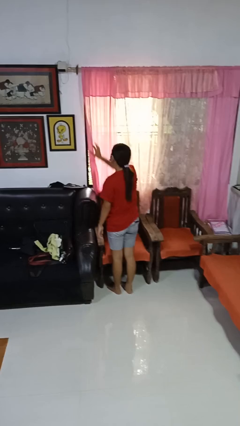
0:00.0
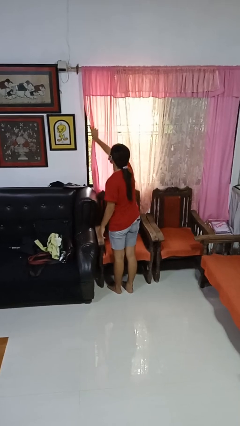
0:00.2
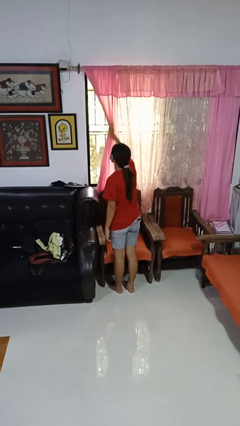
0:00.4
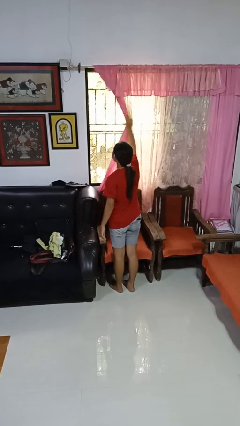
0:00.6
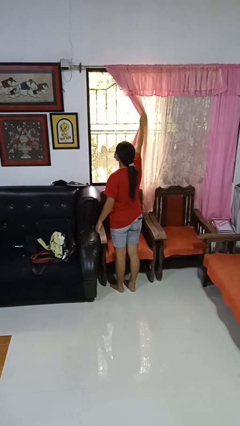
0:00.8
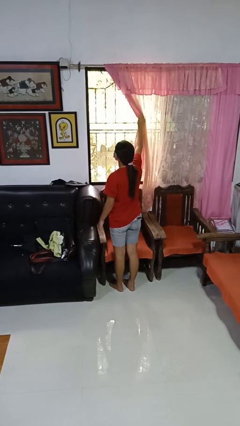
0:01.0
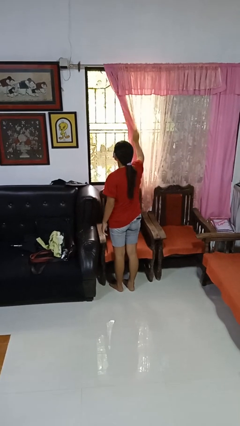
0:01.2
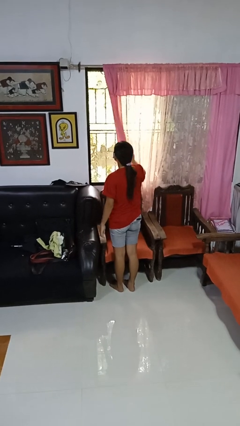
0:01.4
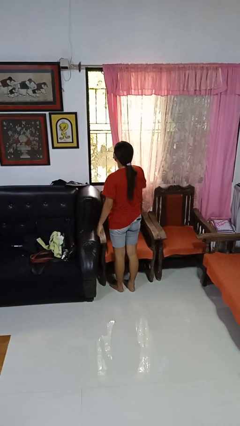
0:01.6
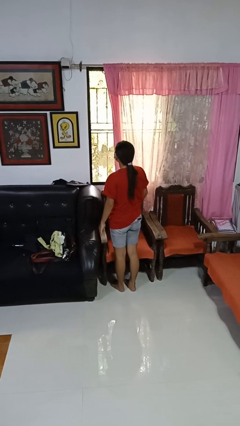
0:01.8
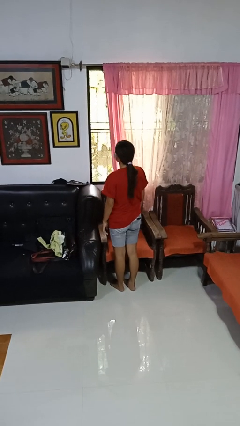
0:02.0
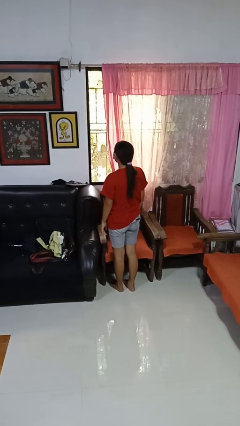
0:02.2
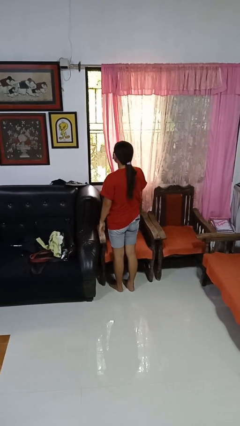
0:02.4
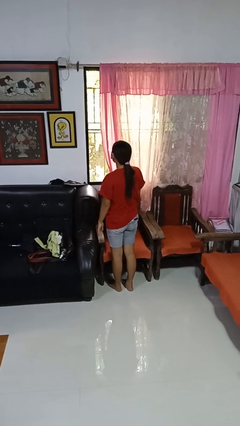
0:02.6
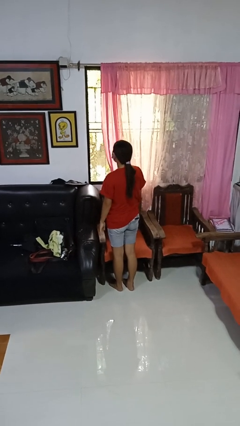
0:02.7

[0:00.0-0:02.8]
person opens curtains

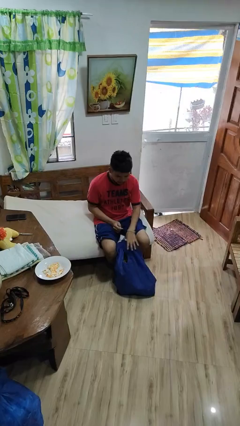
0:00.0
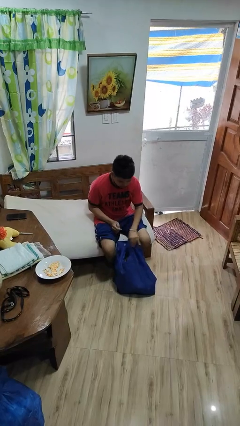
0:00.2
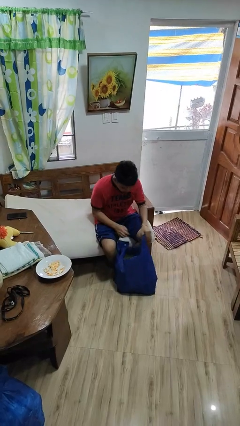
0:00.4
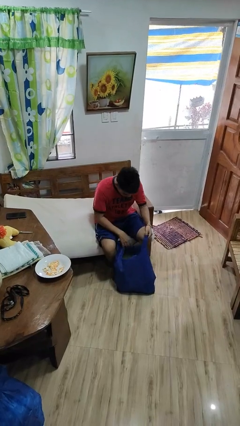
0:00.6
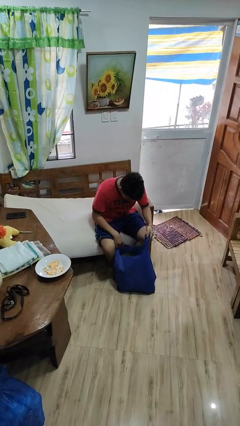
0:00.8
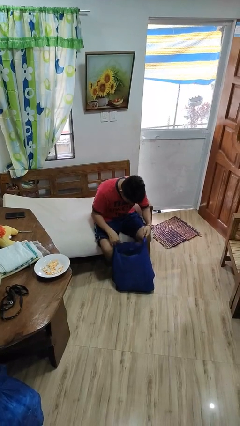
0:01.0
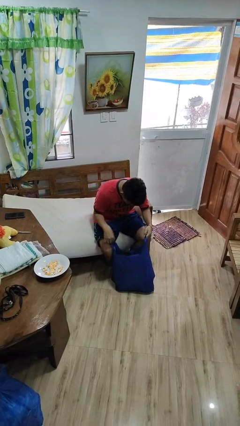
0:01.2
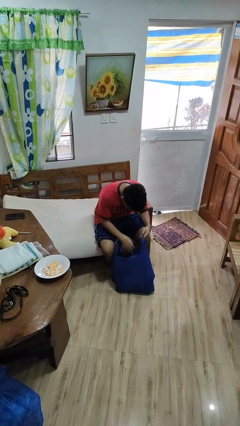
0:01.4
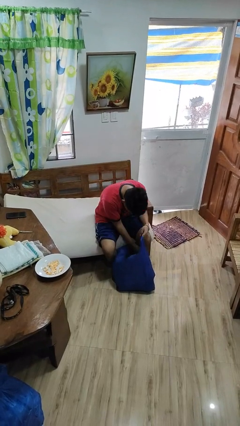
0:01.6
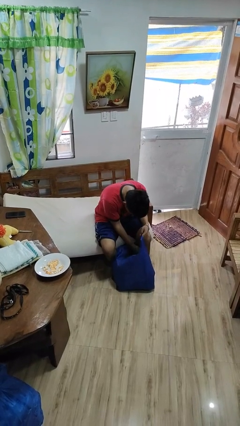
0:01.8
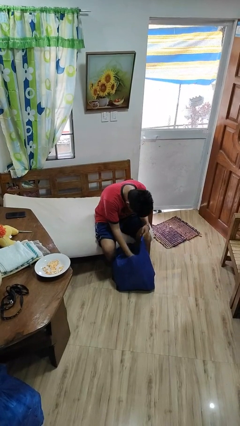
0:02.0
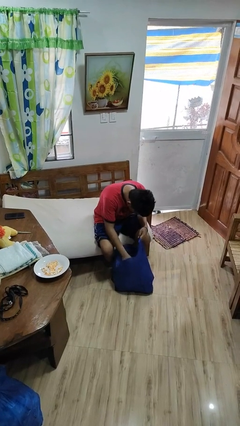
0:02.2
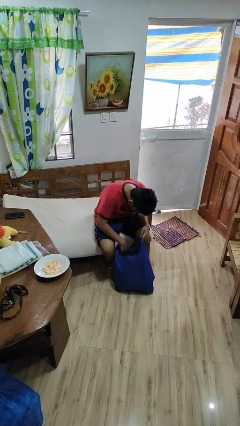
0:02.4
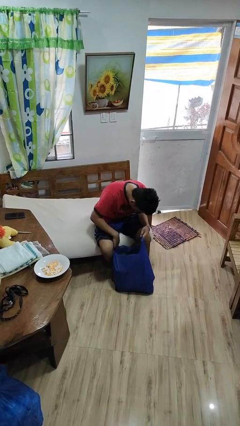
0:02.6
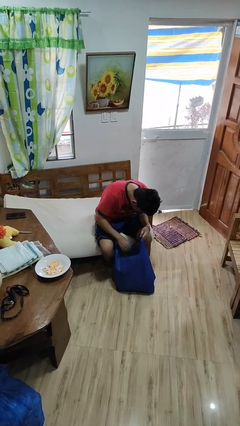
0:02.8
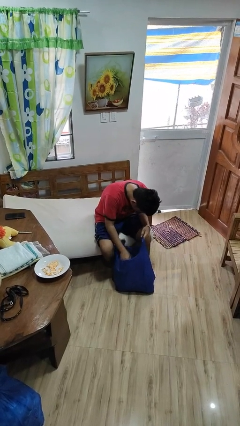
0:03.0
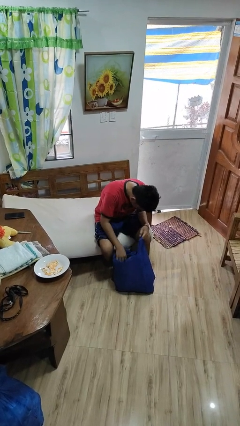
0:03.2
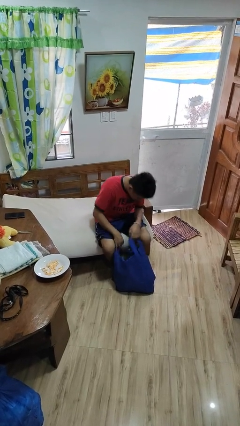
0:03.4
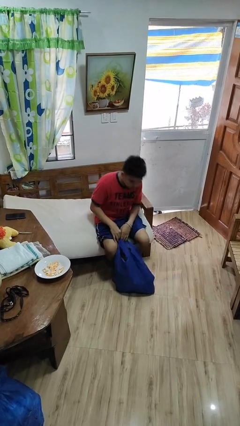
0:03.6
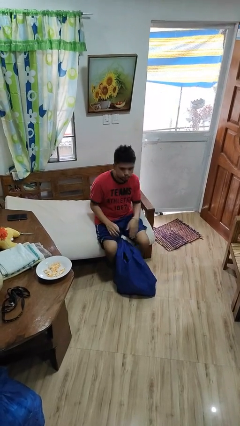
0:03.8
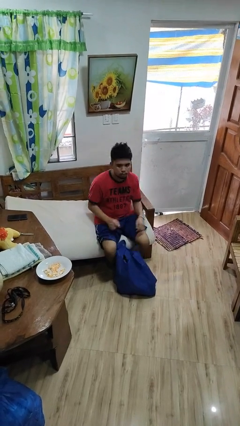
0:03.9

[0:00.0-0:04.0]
person searches in bag

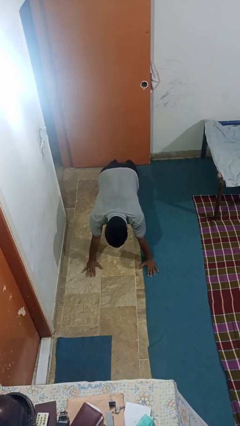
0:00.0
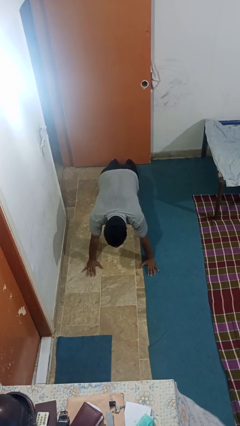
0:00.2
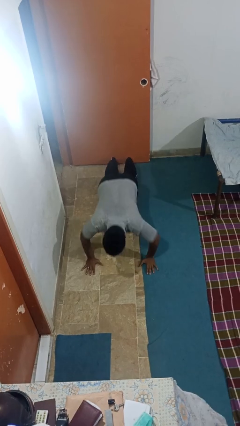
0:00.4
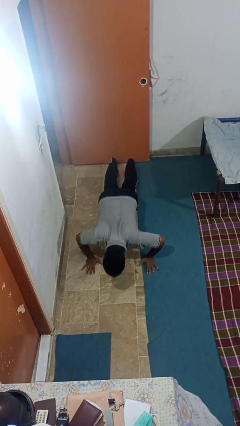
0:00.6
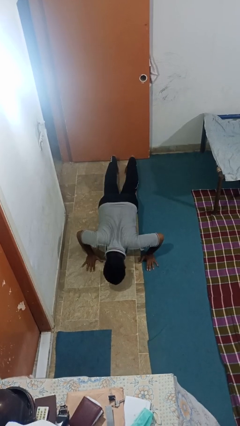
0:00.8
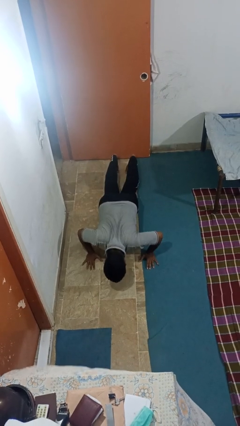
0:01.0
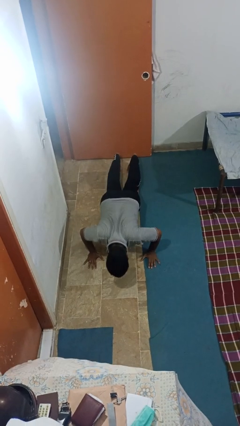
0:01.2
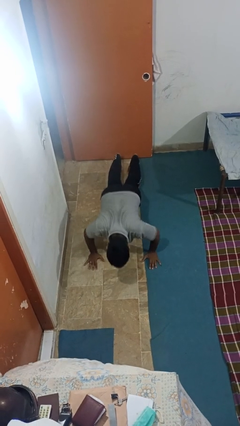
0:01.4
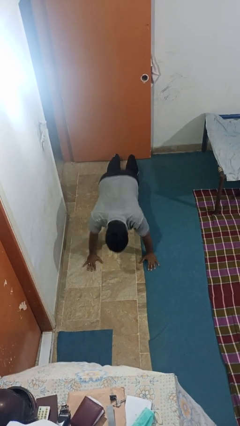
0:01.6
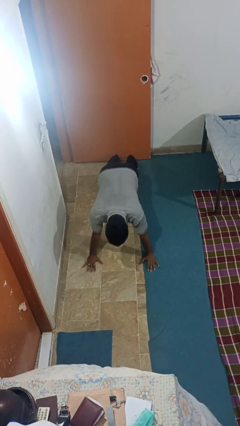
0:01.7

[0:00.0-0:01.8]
person exercises with pushup

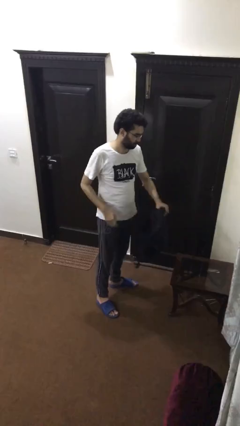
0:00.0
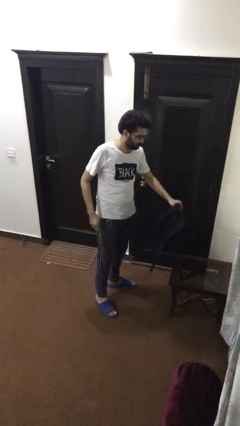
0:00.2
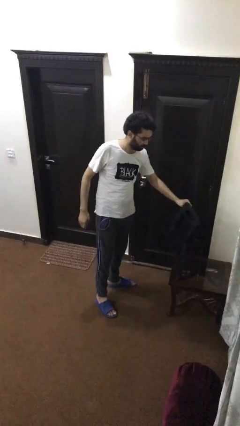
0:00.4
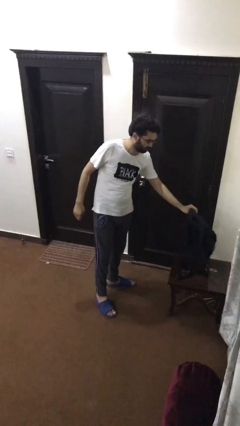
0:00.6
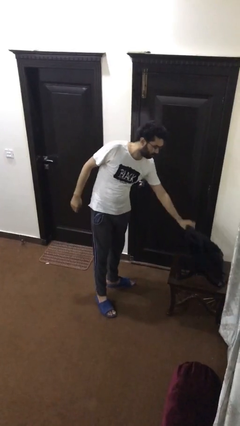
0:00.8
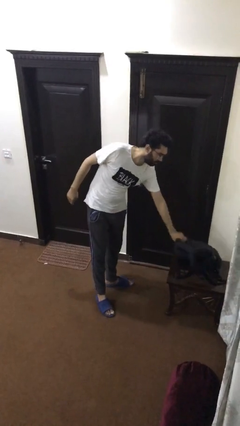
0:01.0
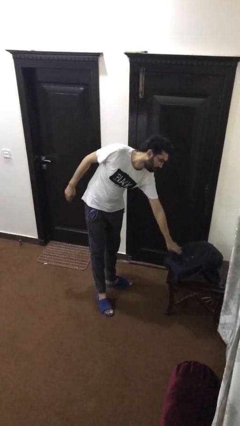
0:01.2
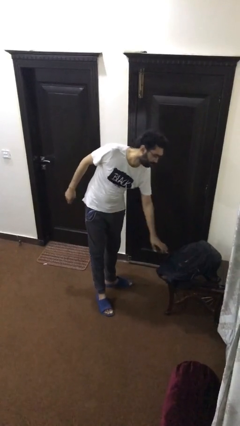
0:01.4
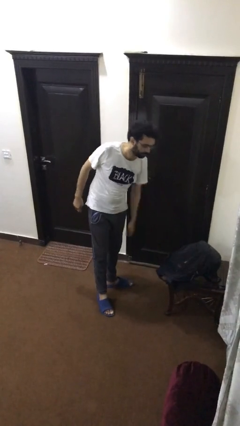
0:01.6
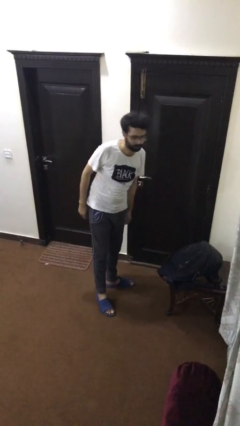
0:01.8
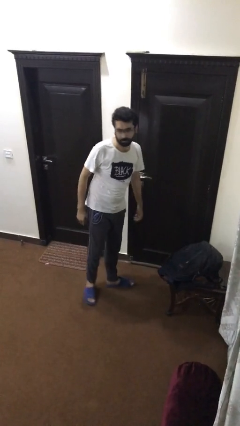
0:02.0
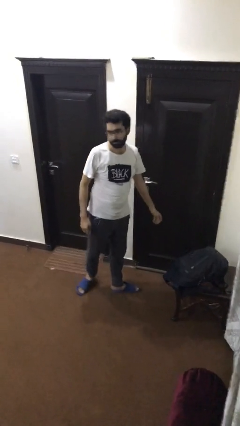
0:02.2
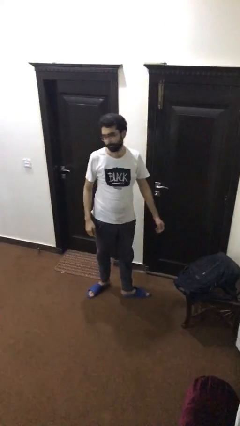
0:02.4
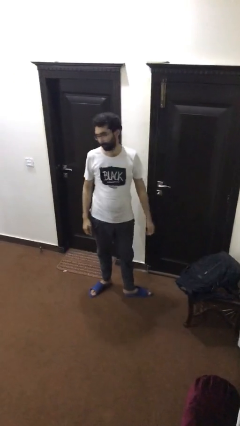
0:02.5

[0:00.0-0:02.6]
person puts down object on table

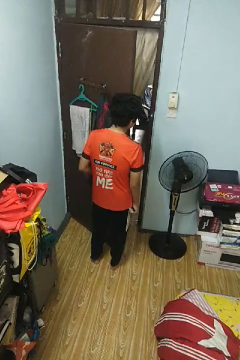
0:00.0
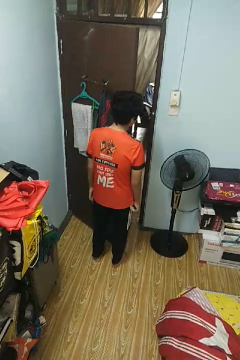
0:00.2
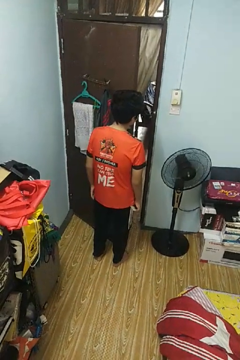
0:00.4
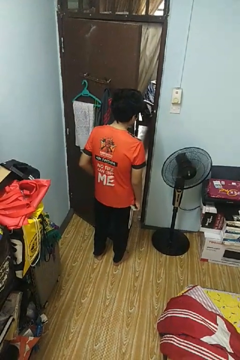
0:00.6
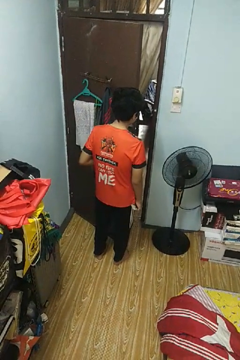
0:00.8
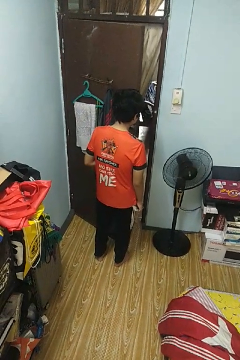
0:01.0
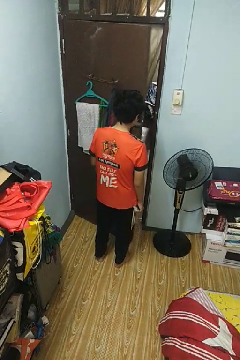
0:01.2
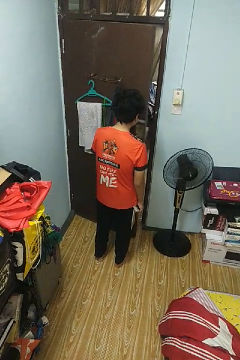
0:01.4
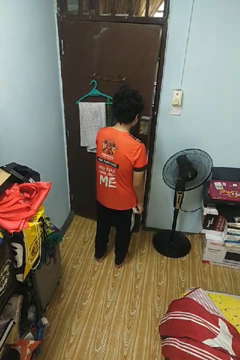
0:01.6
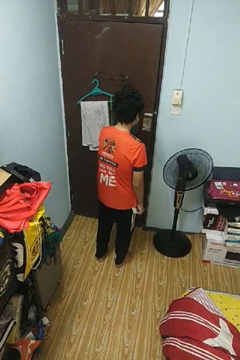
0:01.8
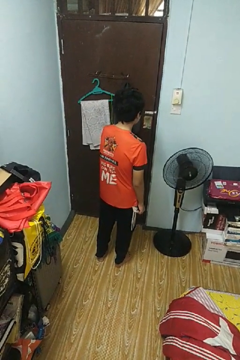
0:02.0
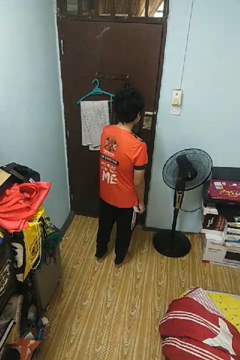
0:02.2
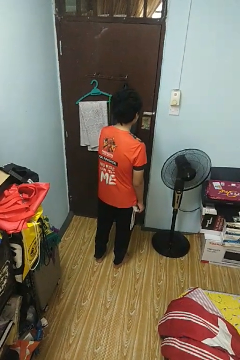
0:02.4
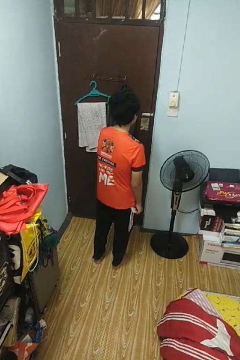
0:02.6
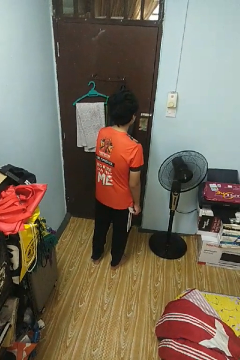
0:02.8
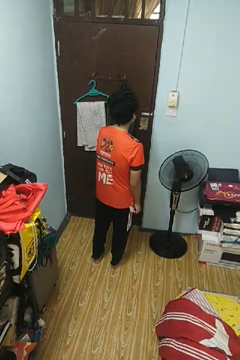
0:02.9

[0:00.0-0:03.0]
person closes facility door

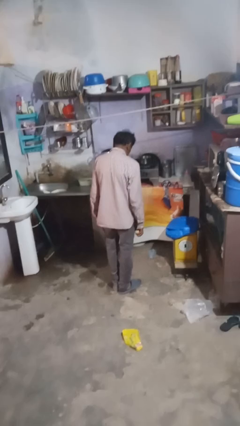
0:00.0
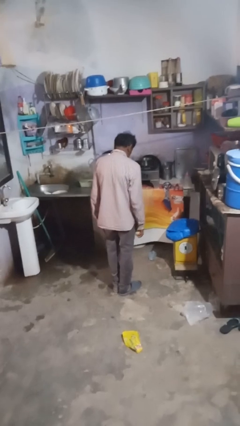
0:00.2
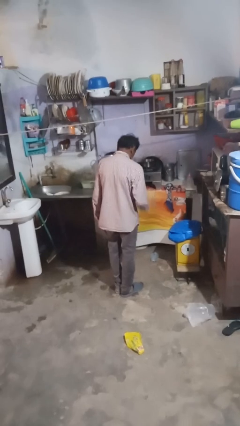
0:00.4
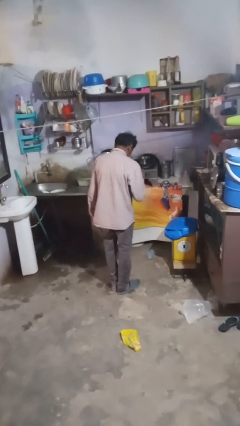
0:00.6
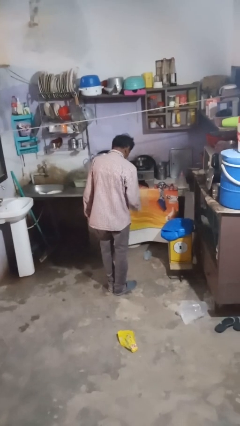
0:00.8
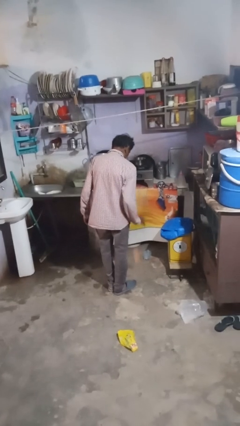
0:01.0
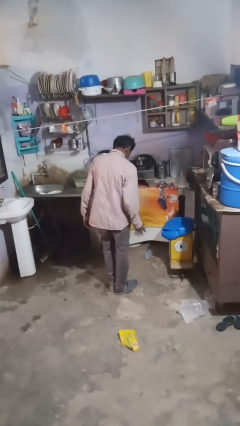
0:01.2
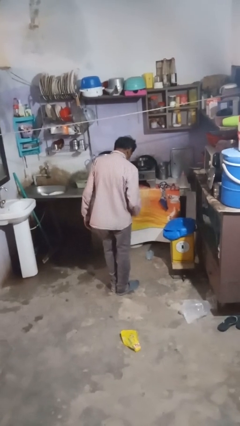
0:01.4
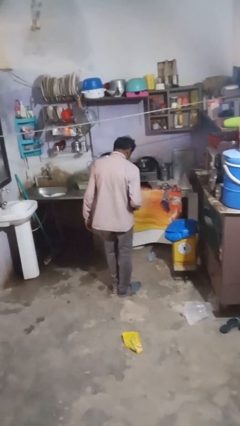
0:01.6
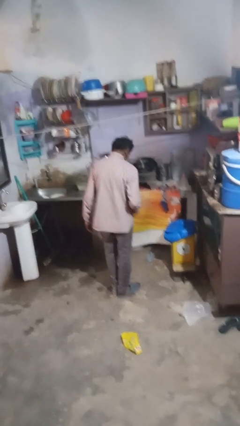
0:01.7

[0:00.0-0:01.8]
person bounces ball on floor

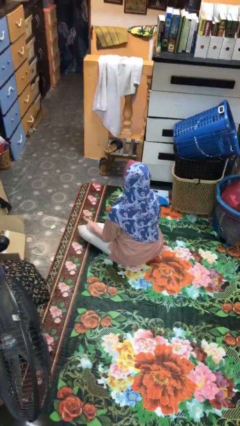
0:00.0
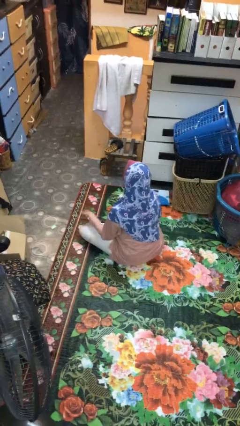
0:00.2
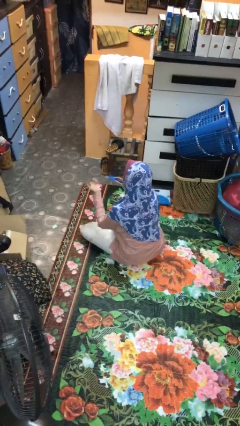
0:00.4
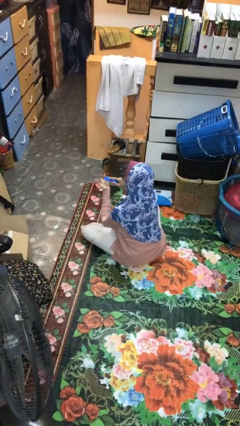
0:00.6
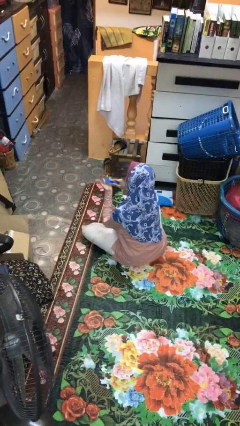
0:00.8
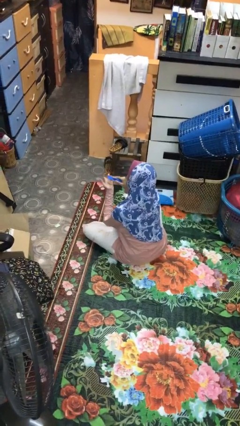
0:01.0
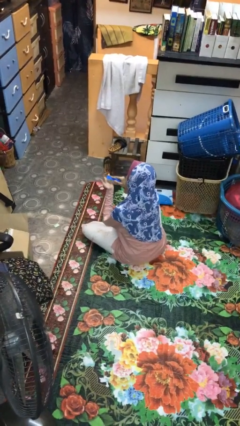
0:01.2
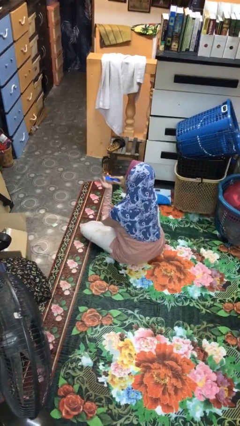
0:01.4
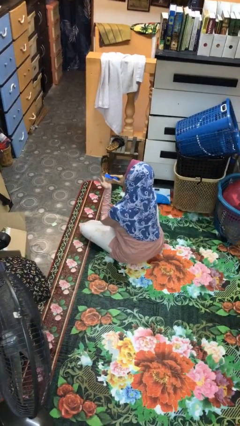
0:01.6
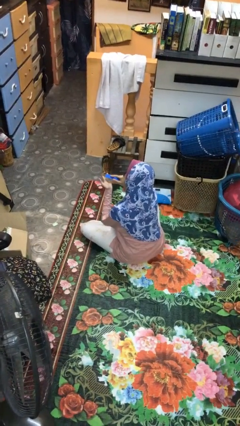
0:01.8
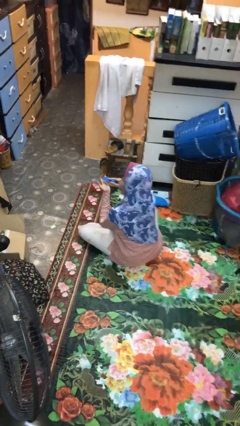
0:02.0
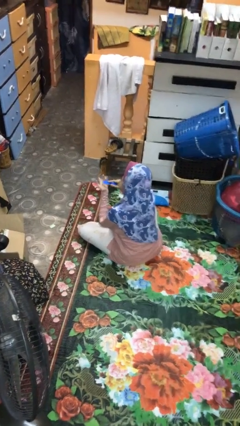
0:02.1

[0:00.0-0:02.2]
person files fingernails
